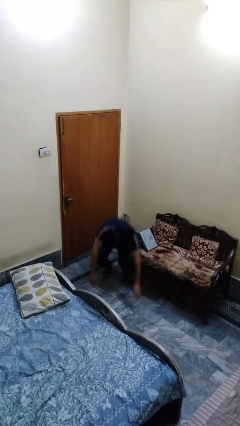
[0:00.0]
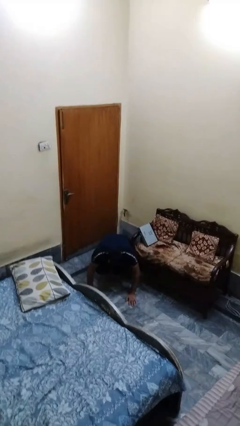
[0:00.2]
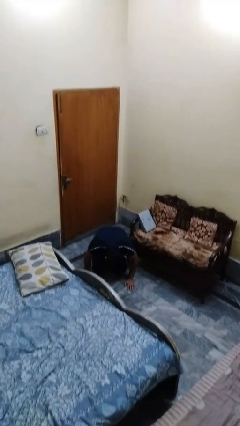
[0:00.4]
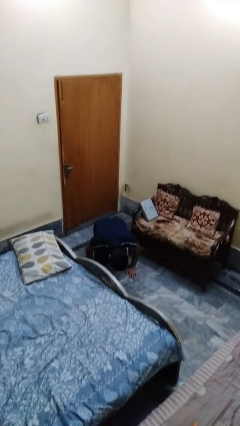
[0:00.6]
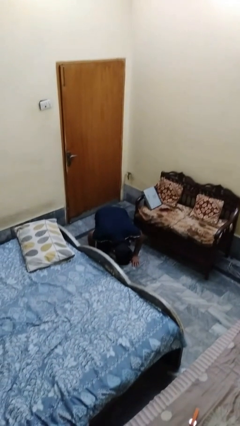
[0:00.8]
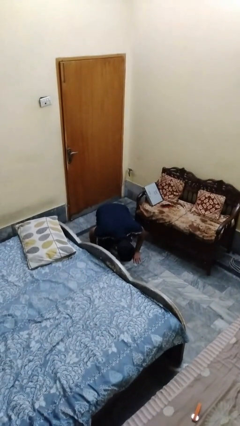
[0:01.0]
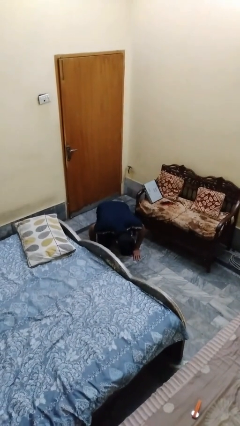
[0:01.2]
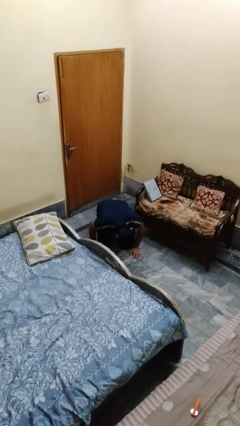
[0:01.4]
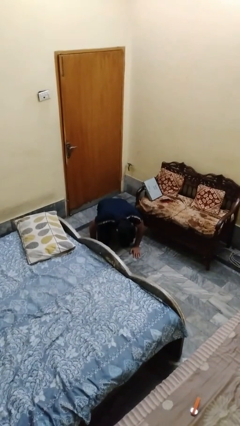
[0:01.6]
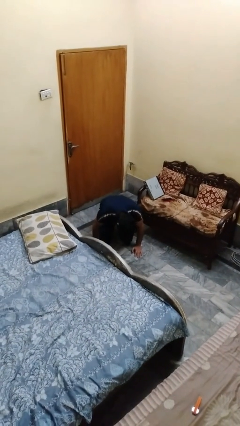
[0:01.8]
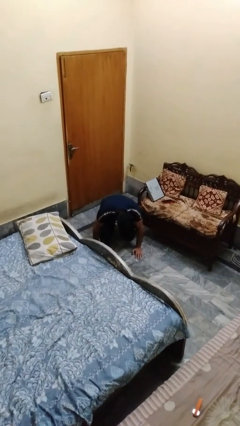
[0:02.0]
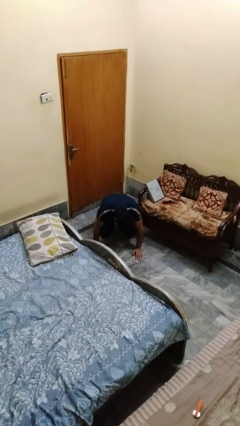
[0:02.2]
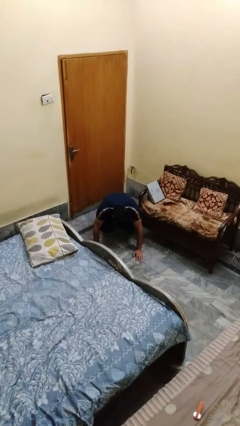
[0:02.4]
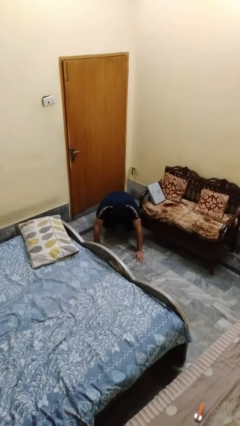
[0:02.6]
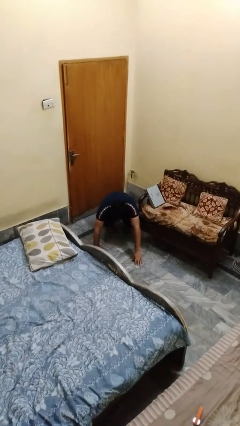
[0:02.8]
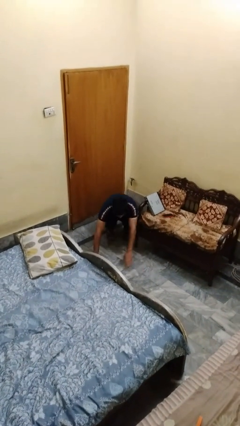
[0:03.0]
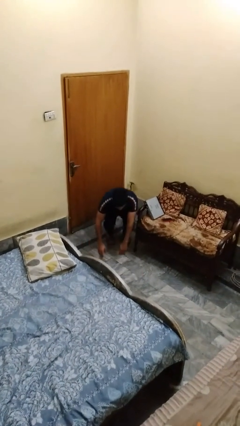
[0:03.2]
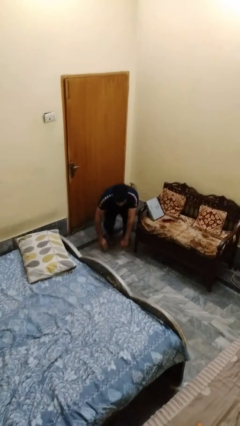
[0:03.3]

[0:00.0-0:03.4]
person trips on object on floor

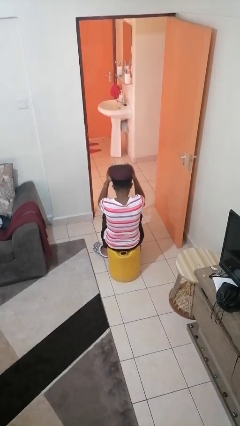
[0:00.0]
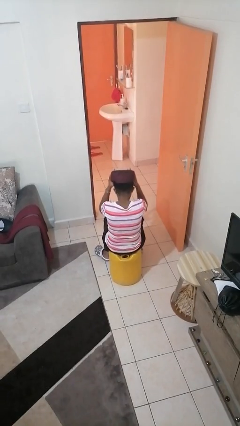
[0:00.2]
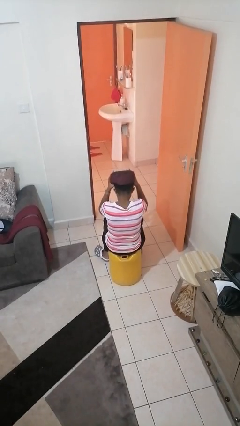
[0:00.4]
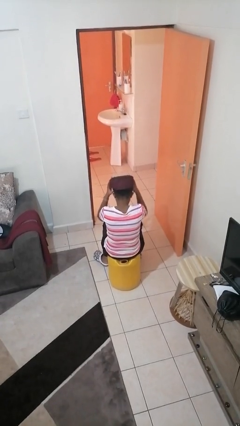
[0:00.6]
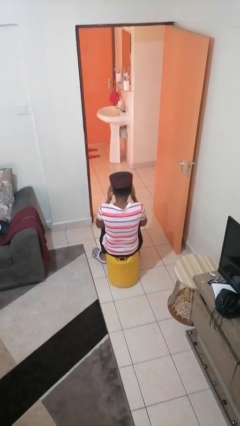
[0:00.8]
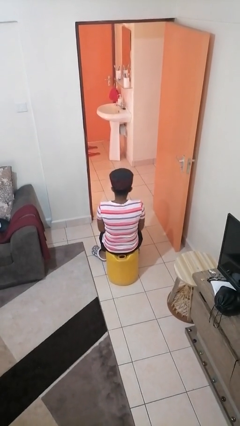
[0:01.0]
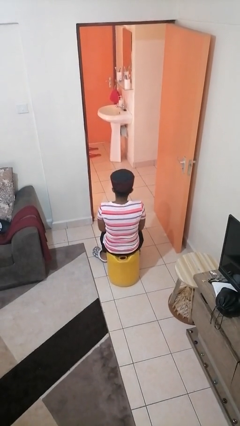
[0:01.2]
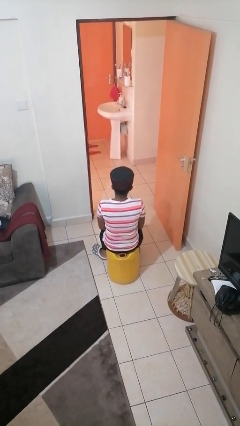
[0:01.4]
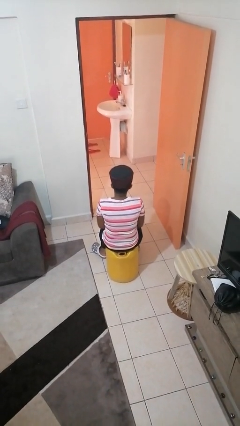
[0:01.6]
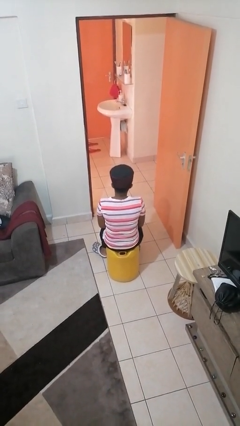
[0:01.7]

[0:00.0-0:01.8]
person puts on hat

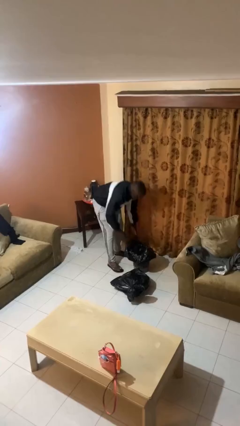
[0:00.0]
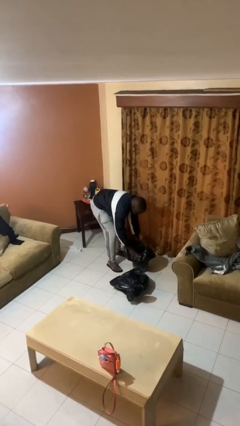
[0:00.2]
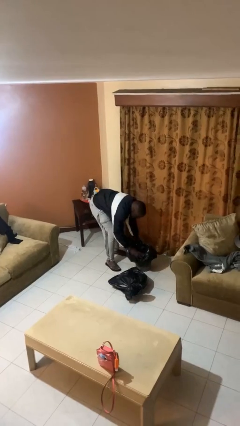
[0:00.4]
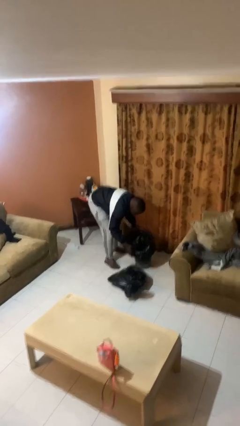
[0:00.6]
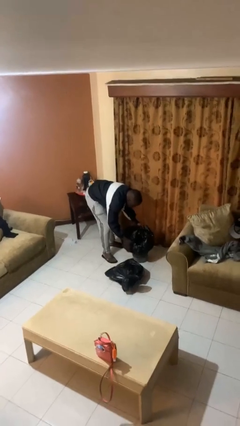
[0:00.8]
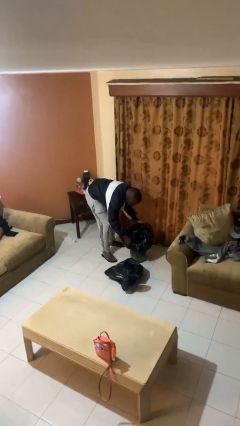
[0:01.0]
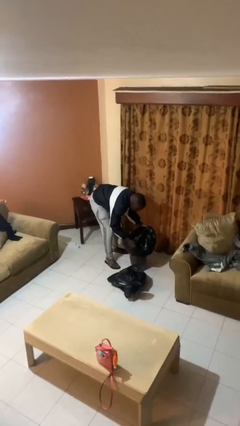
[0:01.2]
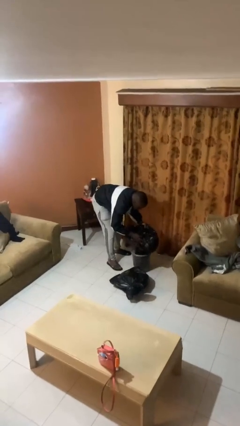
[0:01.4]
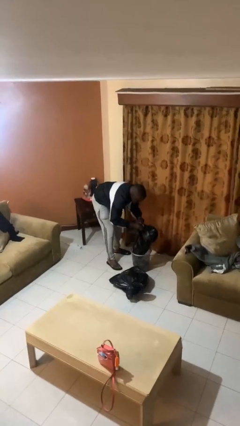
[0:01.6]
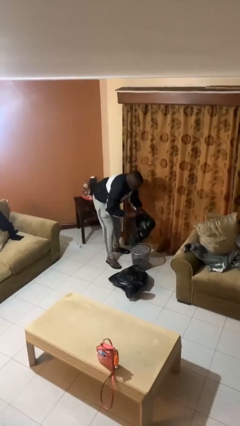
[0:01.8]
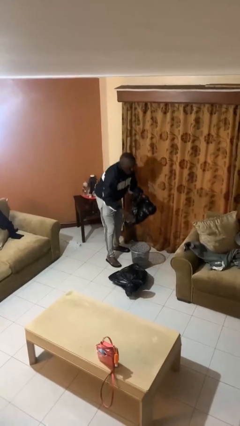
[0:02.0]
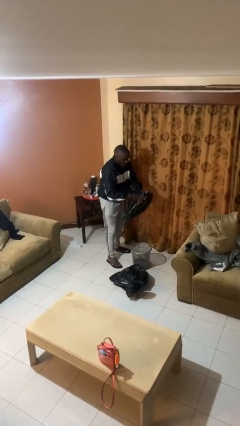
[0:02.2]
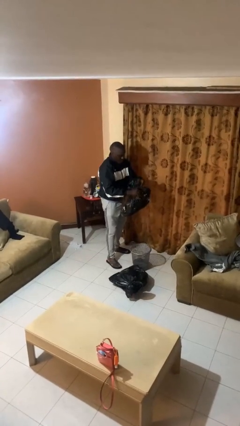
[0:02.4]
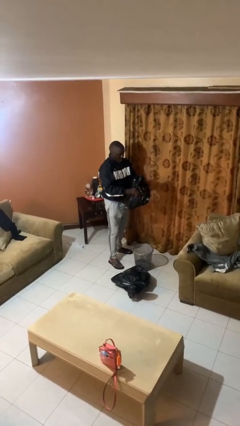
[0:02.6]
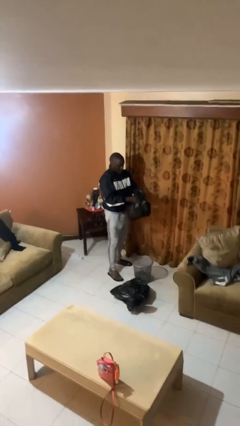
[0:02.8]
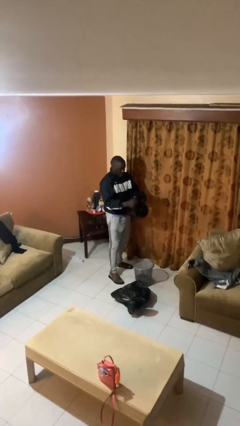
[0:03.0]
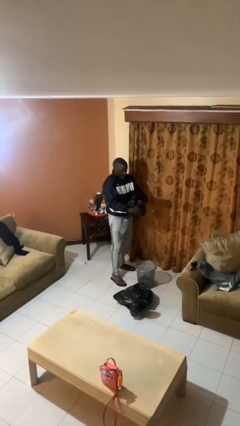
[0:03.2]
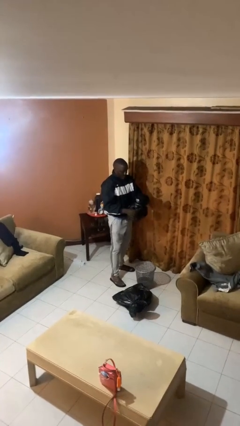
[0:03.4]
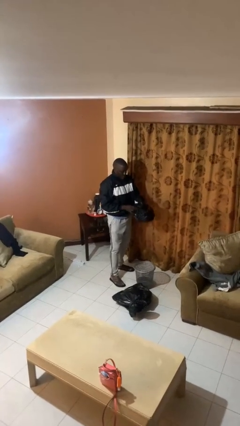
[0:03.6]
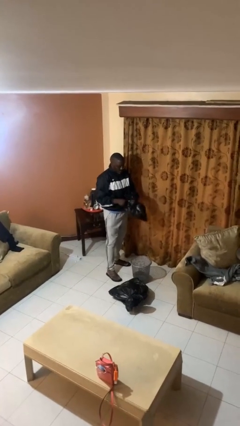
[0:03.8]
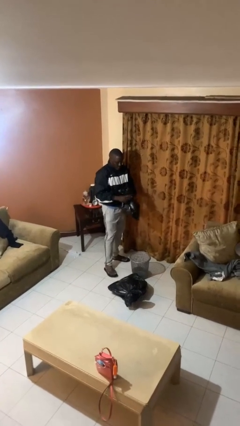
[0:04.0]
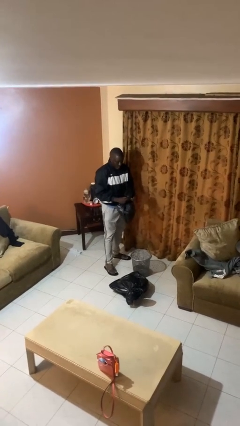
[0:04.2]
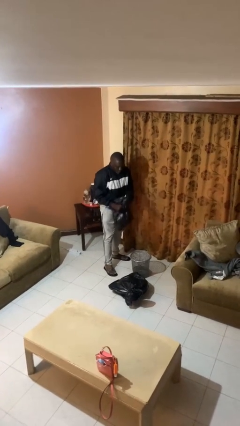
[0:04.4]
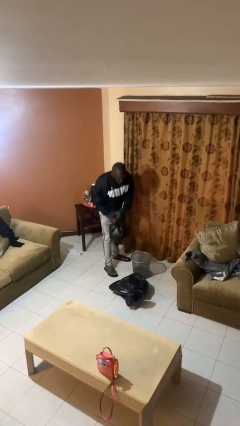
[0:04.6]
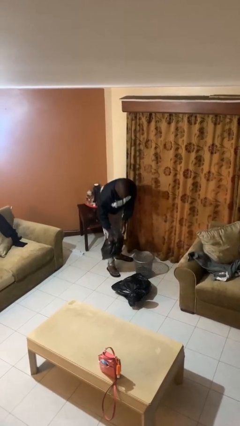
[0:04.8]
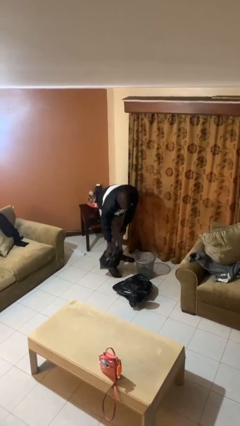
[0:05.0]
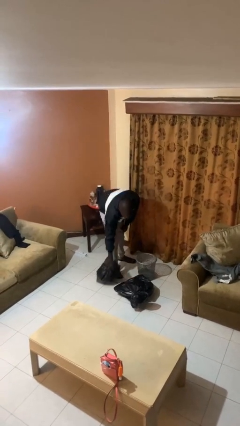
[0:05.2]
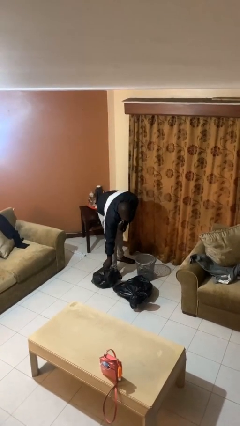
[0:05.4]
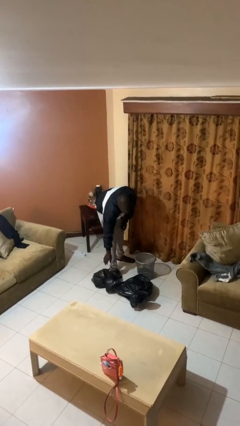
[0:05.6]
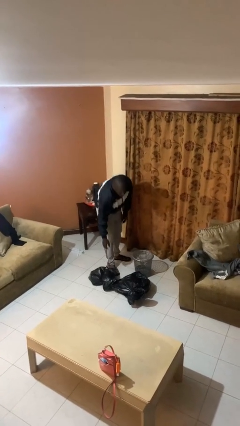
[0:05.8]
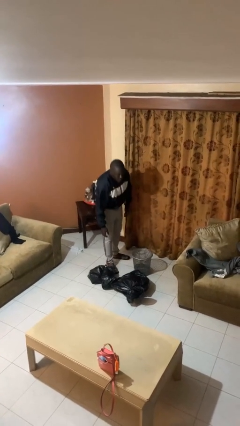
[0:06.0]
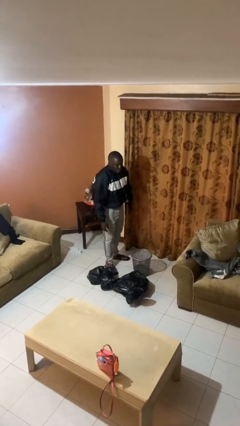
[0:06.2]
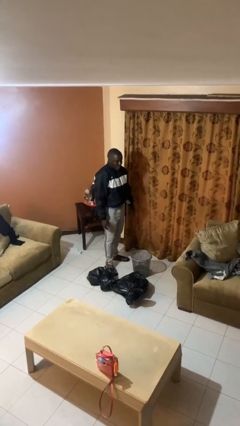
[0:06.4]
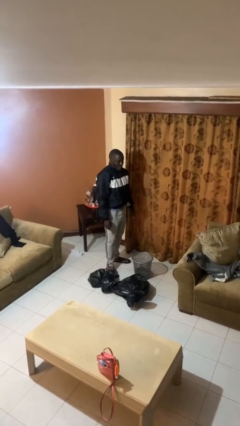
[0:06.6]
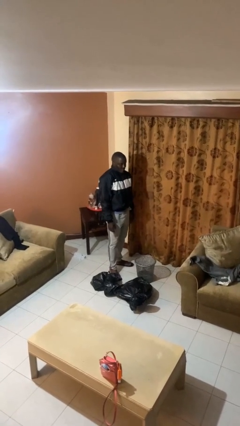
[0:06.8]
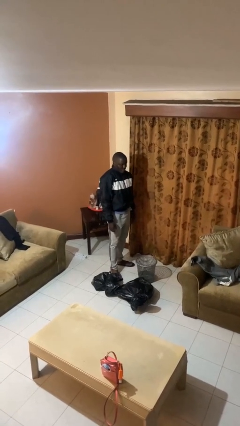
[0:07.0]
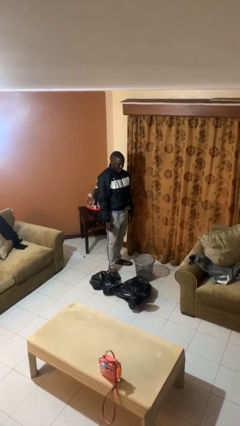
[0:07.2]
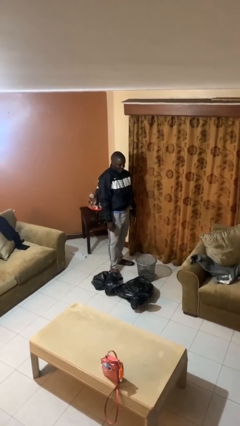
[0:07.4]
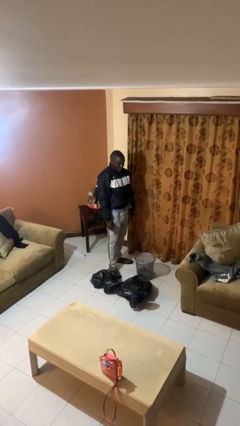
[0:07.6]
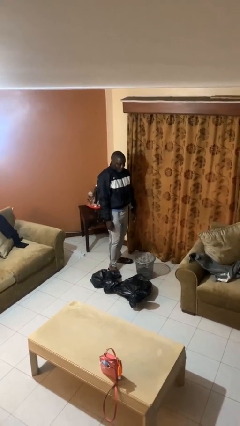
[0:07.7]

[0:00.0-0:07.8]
person removes trashbag from trashcan

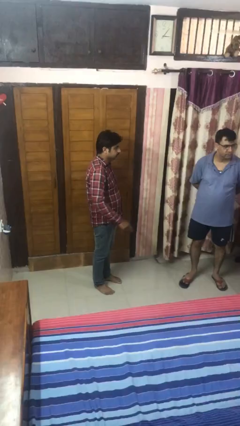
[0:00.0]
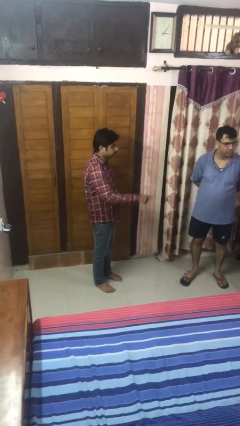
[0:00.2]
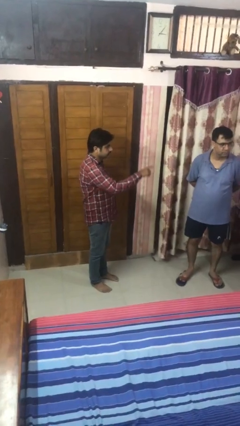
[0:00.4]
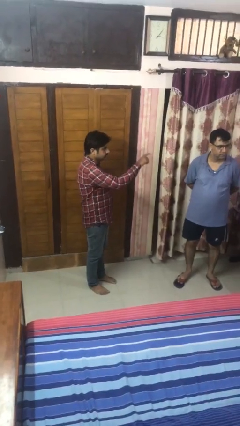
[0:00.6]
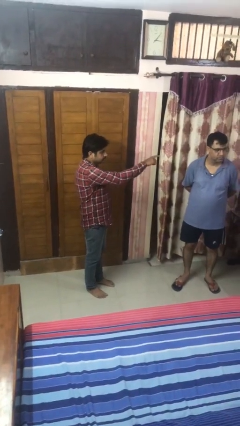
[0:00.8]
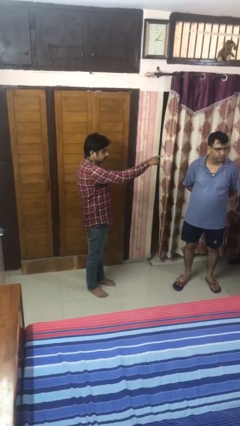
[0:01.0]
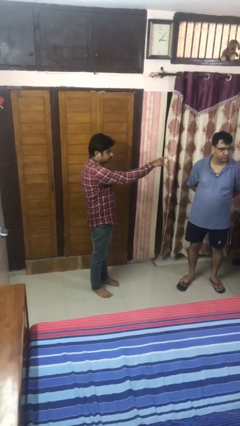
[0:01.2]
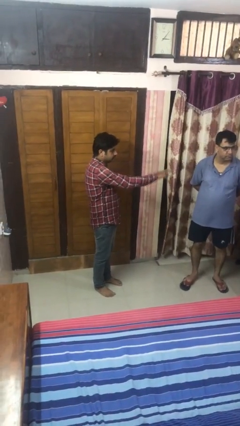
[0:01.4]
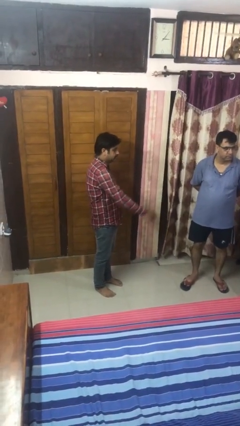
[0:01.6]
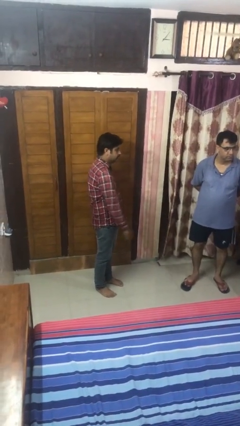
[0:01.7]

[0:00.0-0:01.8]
person points at person

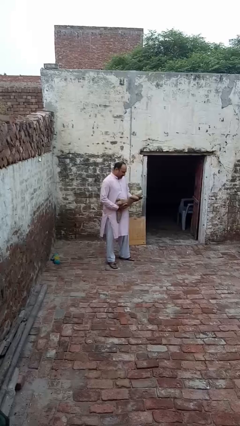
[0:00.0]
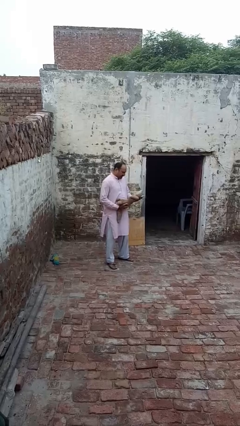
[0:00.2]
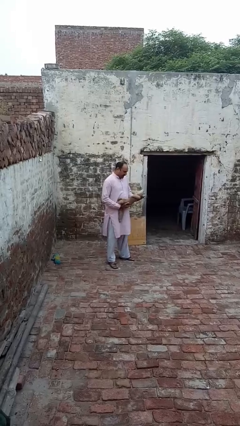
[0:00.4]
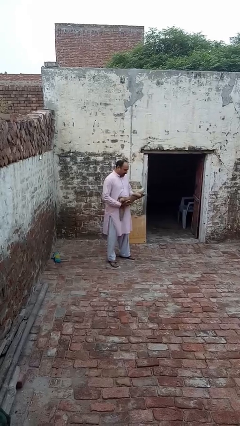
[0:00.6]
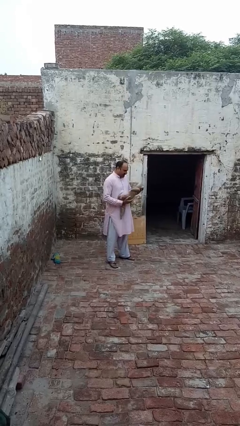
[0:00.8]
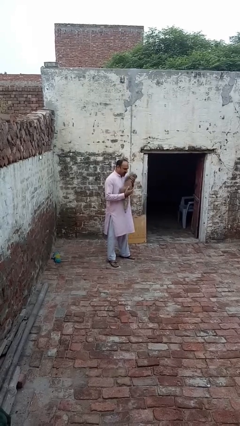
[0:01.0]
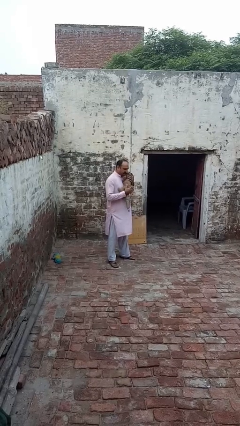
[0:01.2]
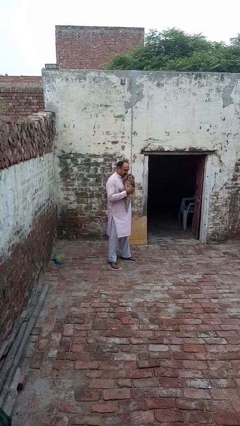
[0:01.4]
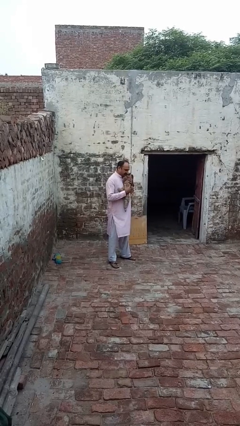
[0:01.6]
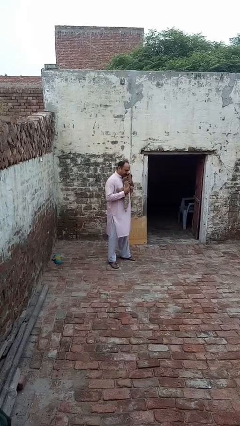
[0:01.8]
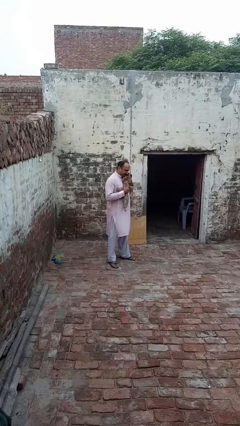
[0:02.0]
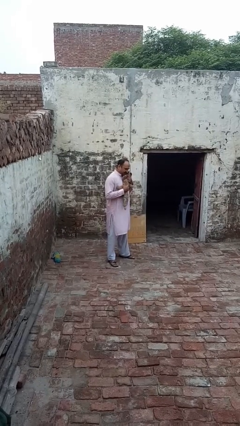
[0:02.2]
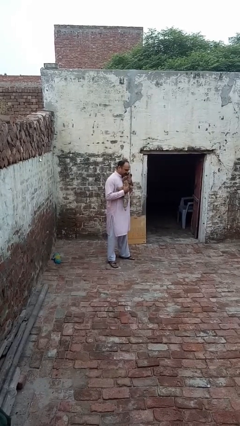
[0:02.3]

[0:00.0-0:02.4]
person hugs stuffed animal

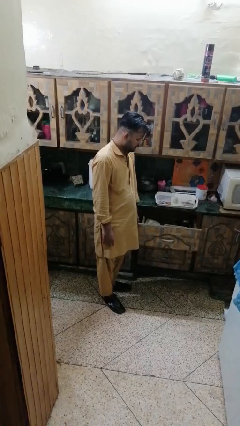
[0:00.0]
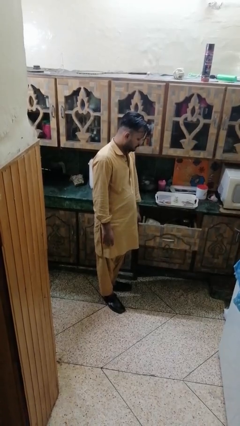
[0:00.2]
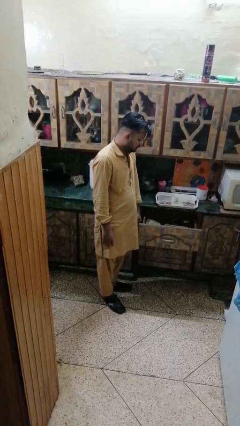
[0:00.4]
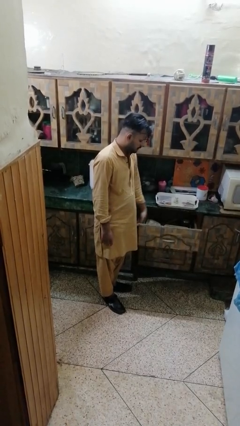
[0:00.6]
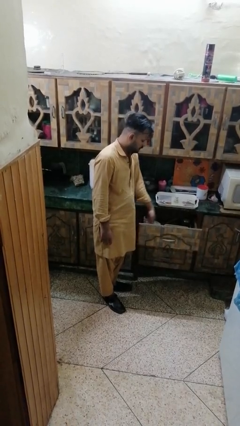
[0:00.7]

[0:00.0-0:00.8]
person takes object from kitchen drawer
